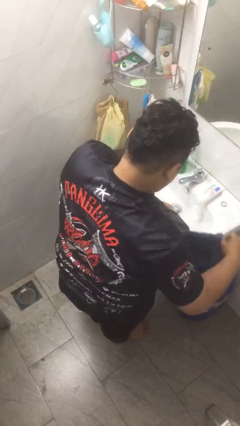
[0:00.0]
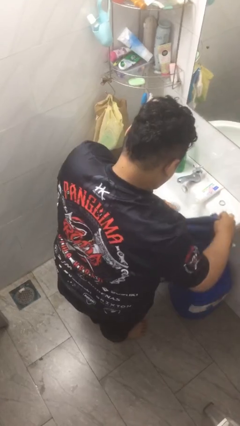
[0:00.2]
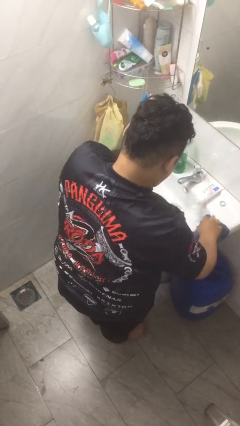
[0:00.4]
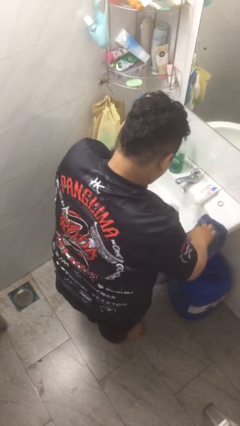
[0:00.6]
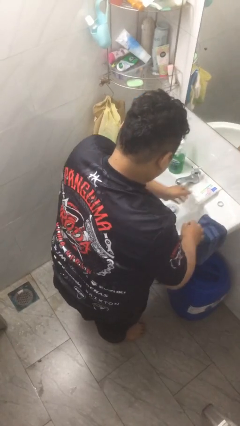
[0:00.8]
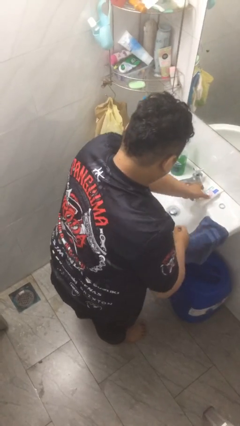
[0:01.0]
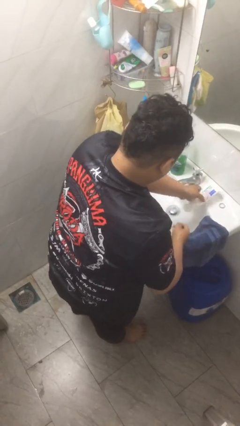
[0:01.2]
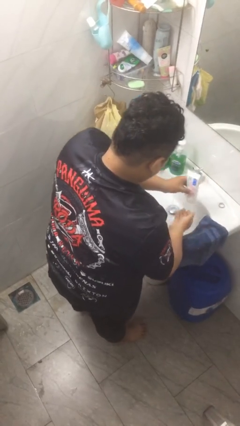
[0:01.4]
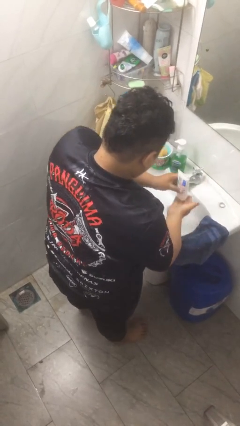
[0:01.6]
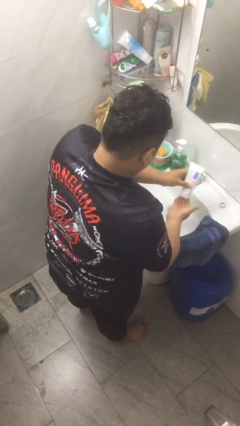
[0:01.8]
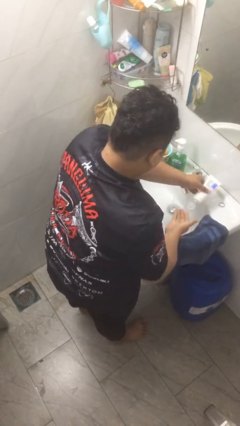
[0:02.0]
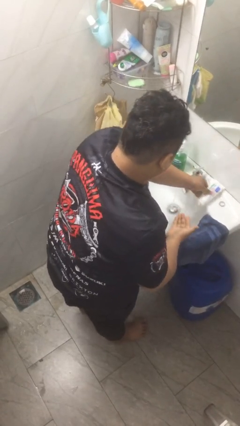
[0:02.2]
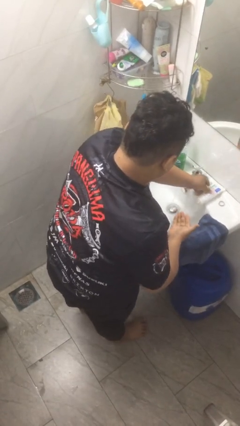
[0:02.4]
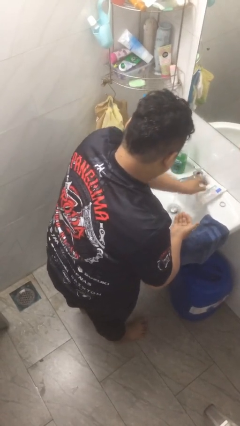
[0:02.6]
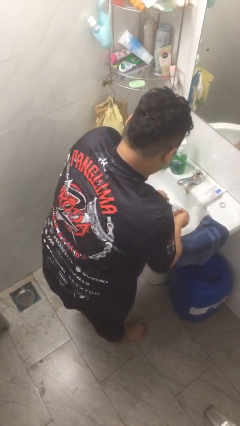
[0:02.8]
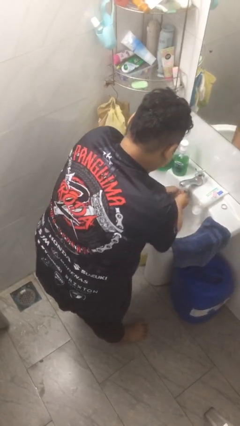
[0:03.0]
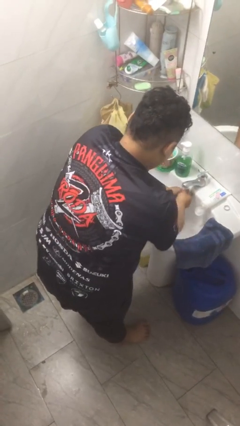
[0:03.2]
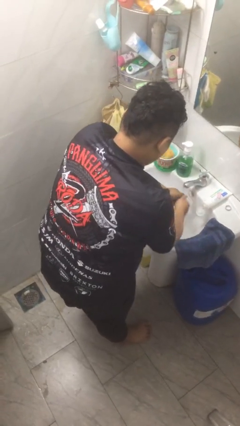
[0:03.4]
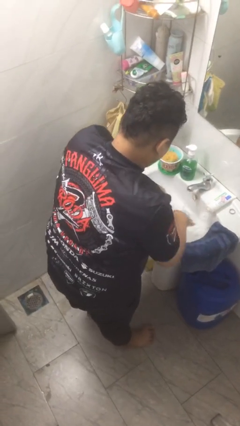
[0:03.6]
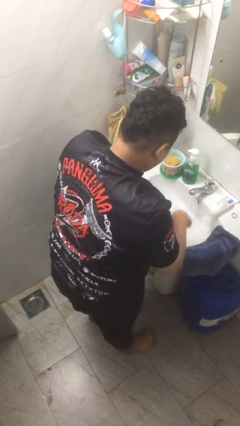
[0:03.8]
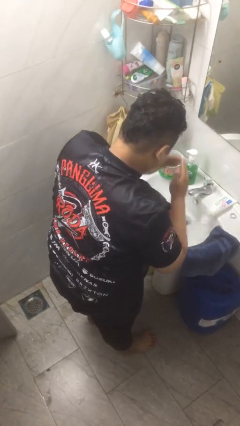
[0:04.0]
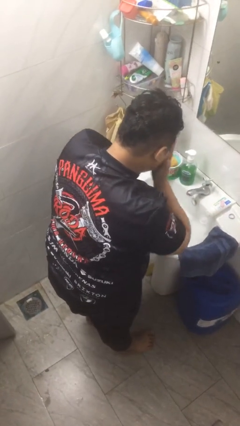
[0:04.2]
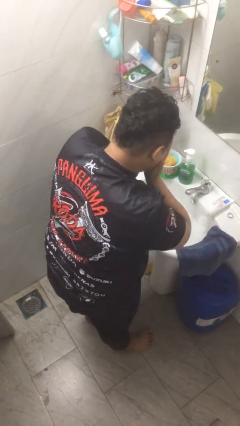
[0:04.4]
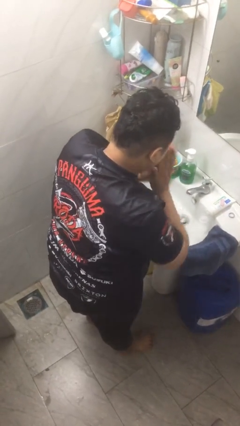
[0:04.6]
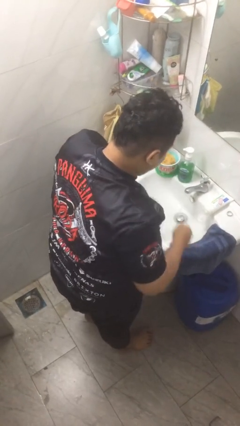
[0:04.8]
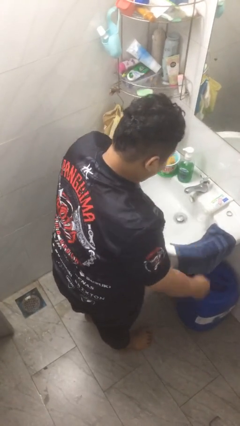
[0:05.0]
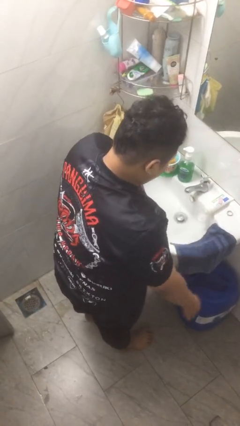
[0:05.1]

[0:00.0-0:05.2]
person washes face

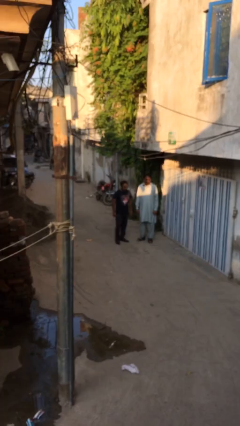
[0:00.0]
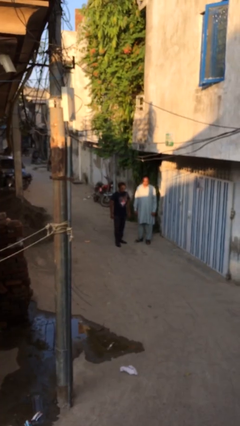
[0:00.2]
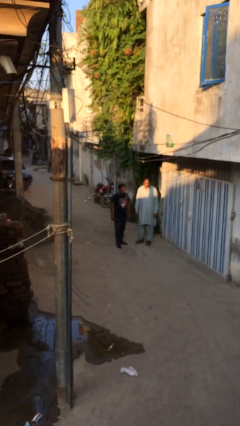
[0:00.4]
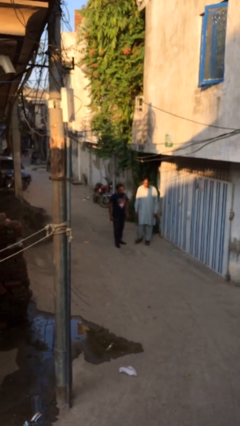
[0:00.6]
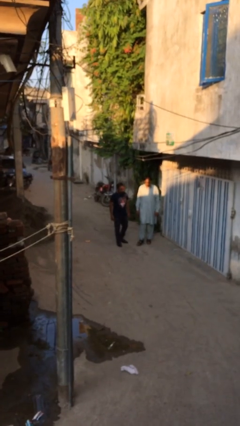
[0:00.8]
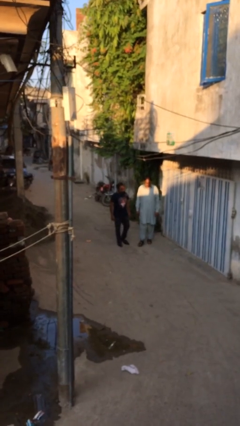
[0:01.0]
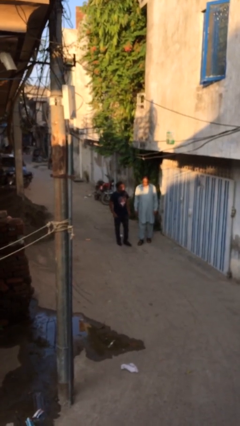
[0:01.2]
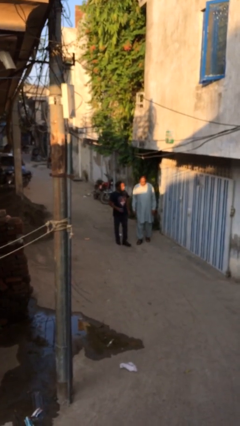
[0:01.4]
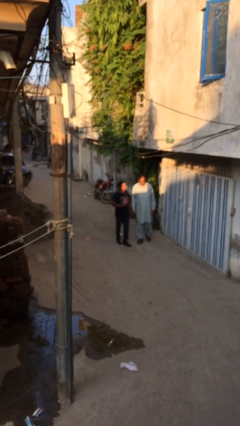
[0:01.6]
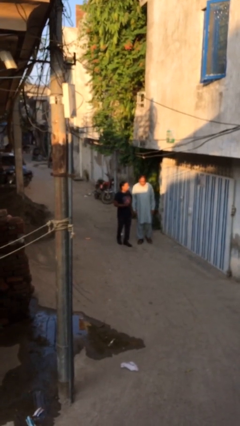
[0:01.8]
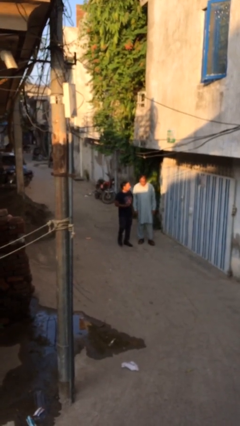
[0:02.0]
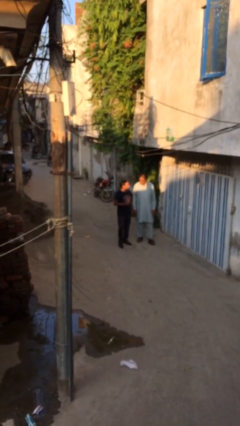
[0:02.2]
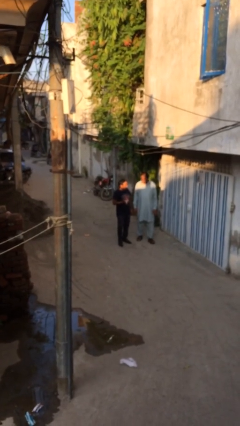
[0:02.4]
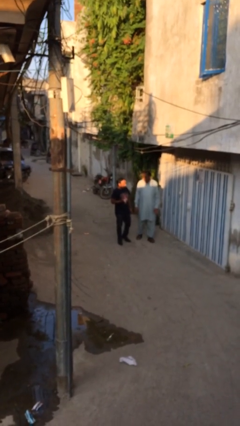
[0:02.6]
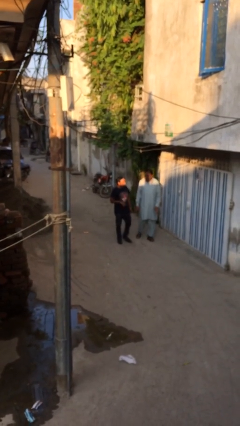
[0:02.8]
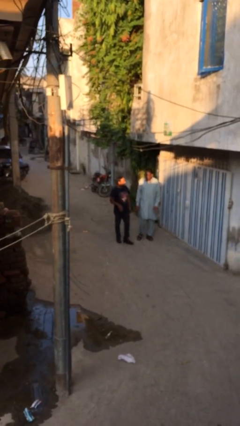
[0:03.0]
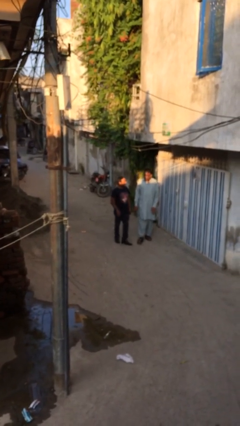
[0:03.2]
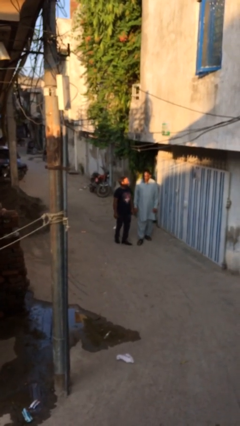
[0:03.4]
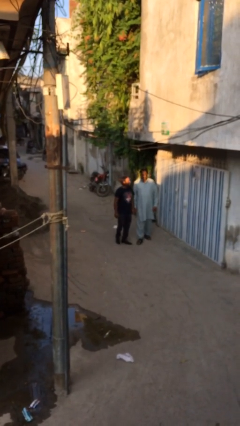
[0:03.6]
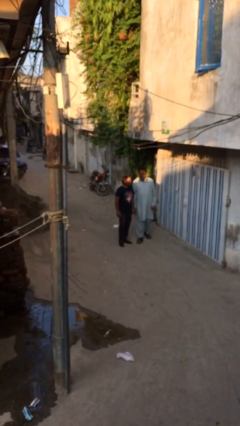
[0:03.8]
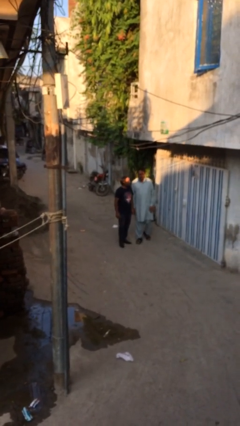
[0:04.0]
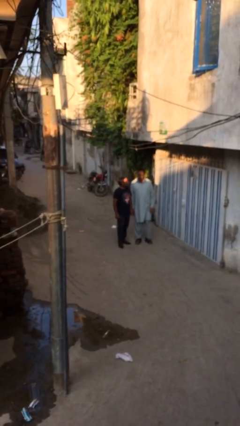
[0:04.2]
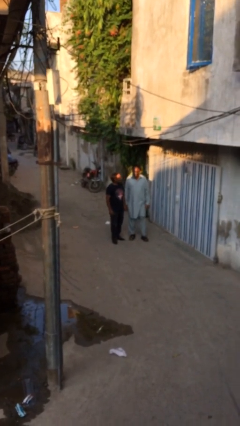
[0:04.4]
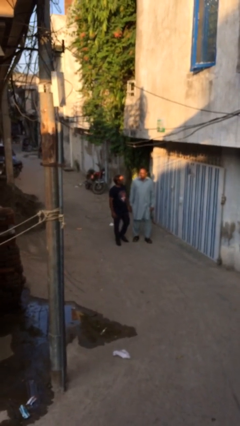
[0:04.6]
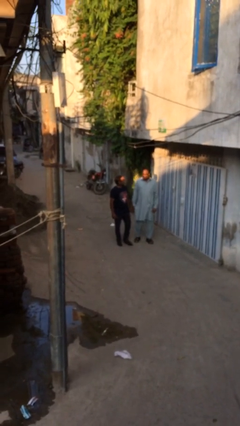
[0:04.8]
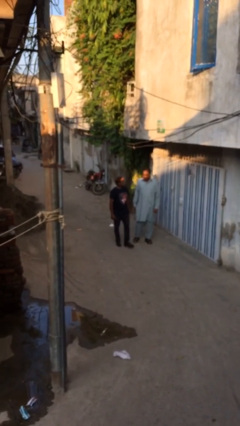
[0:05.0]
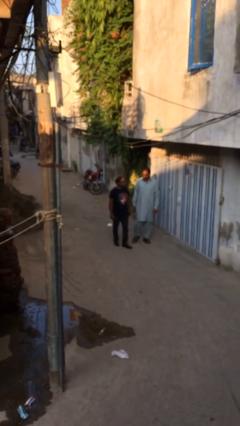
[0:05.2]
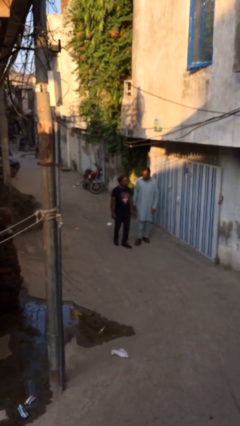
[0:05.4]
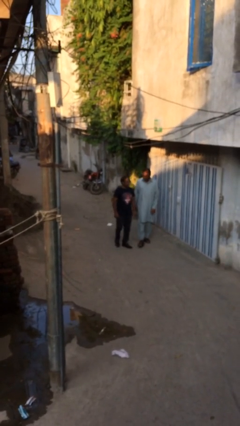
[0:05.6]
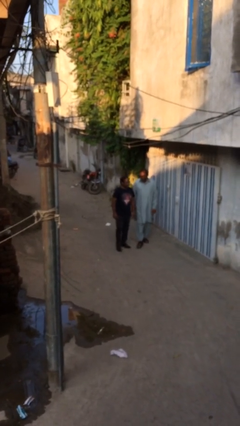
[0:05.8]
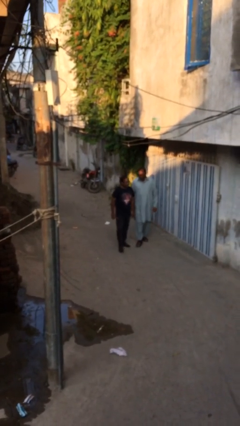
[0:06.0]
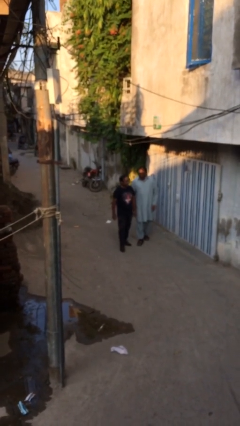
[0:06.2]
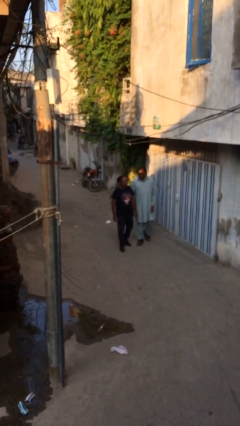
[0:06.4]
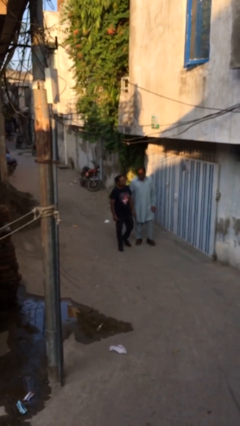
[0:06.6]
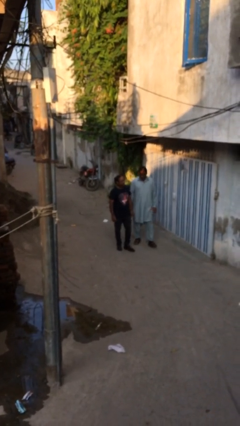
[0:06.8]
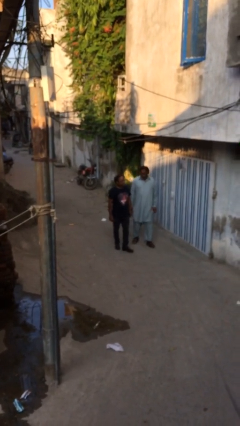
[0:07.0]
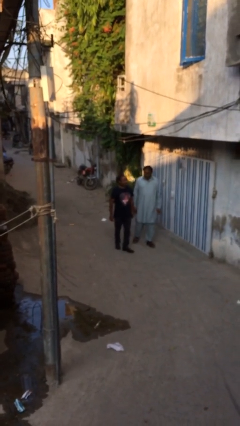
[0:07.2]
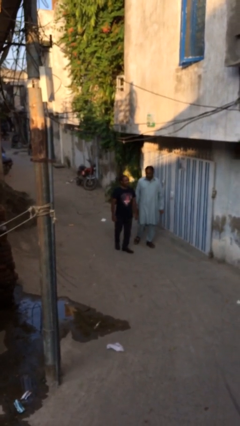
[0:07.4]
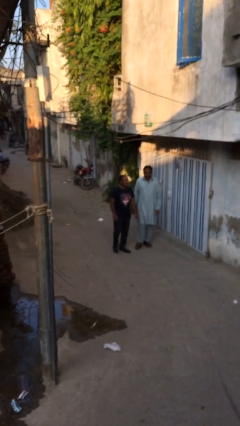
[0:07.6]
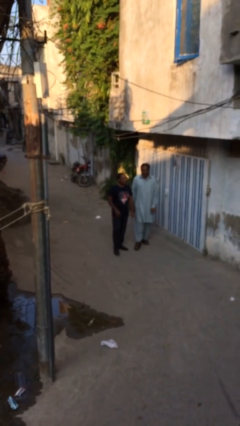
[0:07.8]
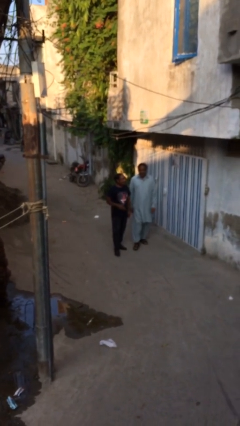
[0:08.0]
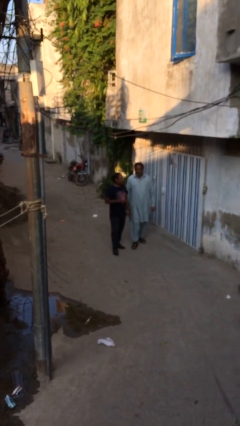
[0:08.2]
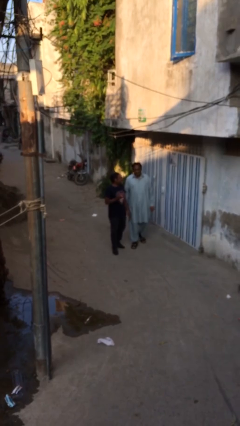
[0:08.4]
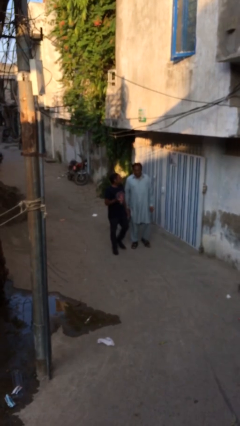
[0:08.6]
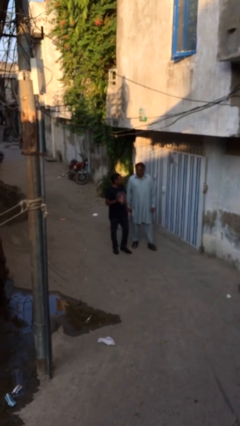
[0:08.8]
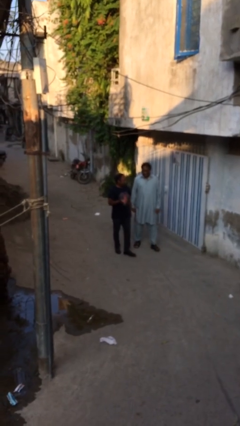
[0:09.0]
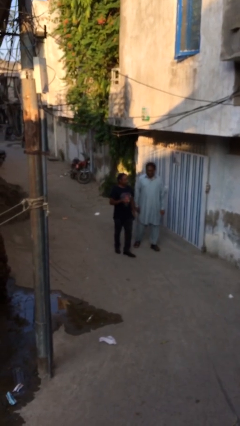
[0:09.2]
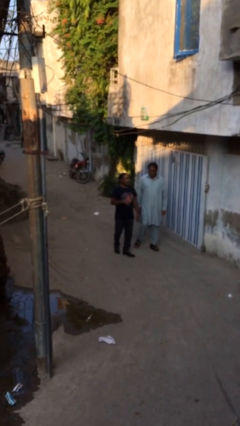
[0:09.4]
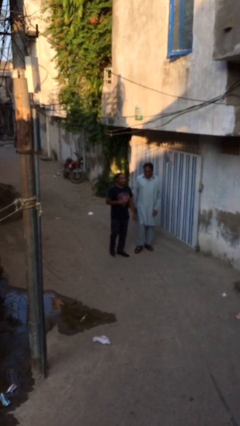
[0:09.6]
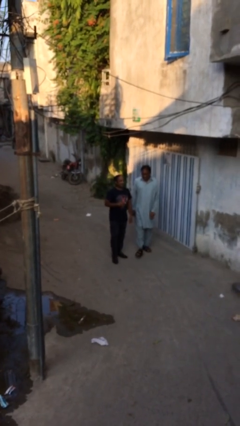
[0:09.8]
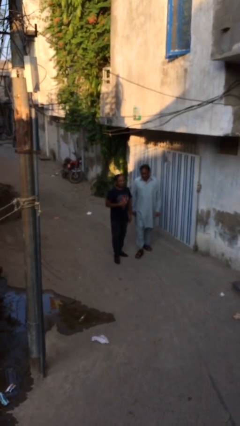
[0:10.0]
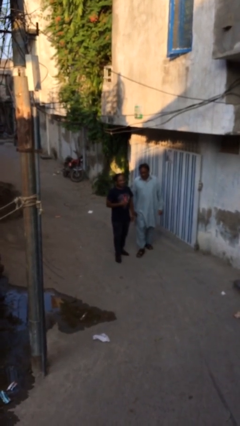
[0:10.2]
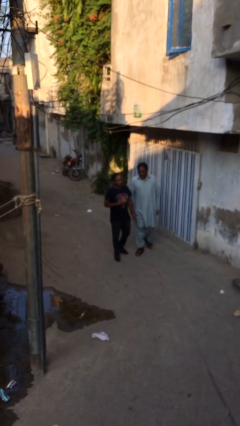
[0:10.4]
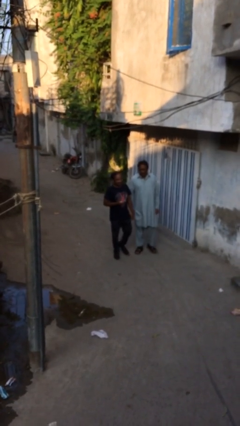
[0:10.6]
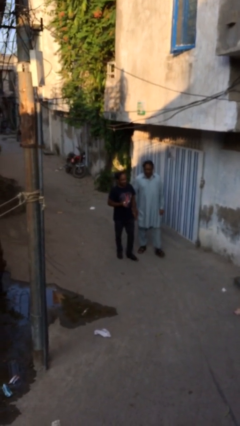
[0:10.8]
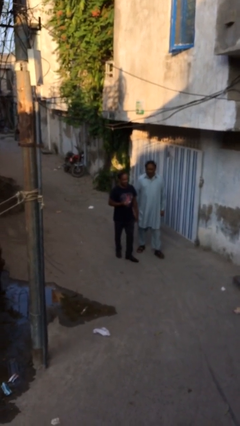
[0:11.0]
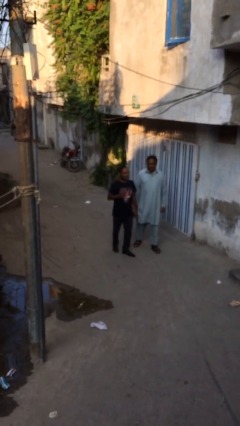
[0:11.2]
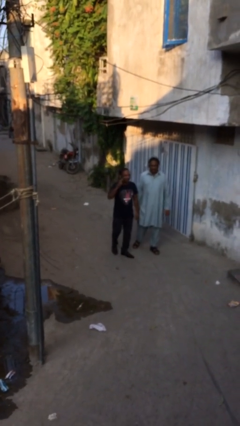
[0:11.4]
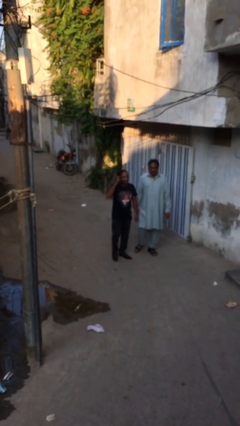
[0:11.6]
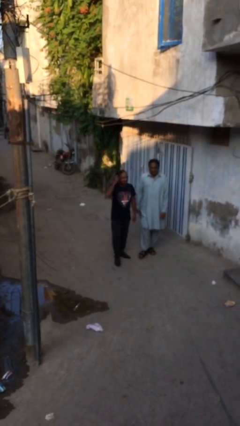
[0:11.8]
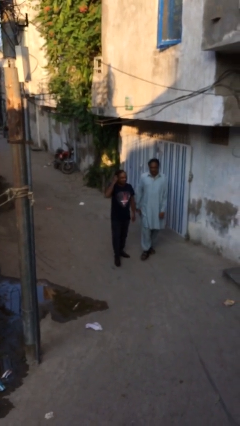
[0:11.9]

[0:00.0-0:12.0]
person talks to person

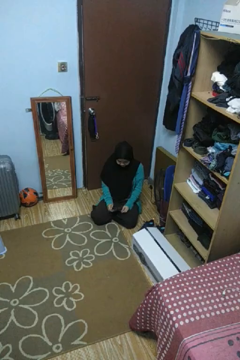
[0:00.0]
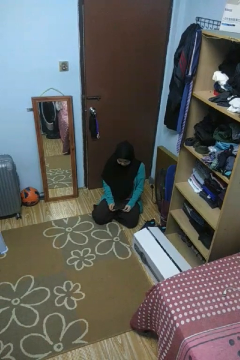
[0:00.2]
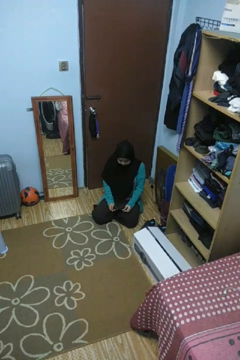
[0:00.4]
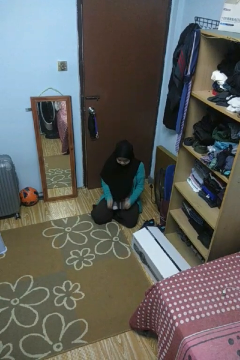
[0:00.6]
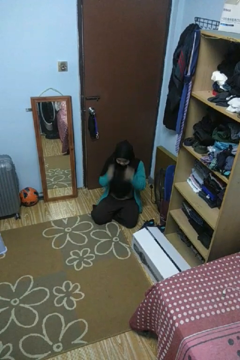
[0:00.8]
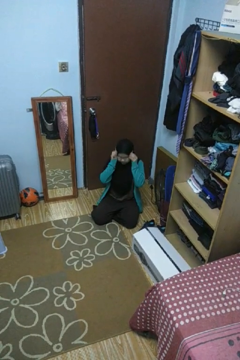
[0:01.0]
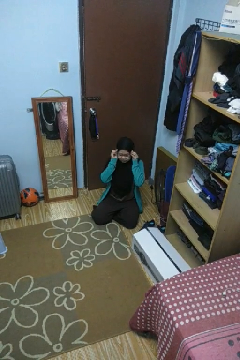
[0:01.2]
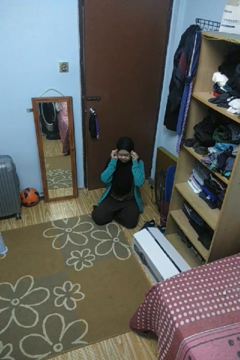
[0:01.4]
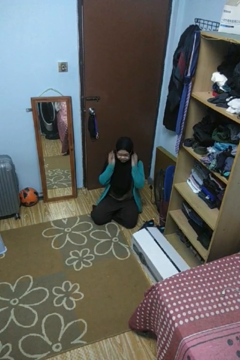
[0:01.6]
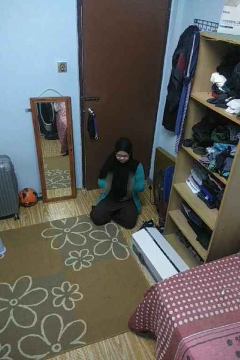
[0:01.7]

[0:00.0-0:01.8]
person puts on glasses
